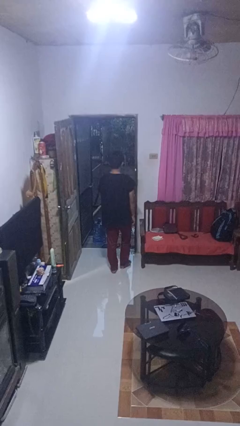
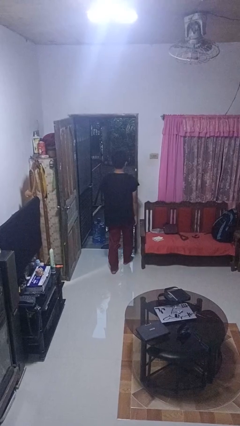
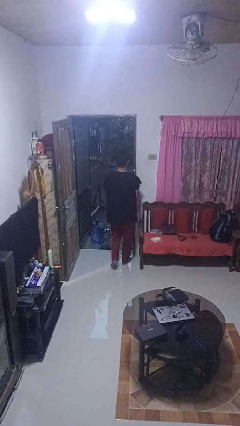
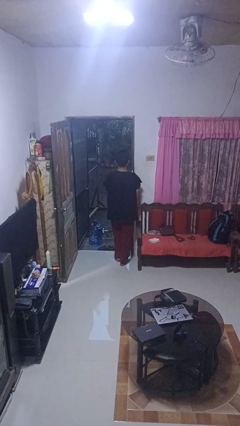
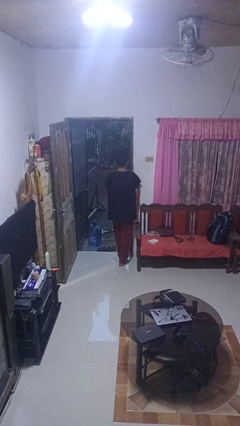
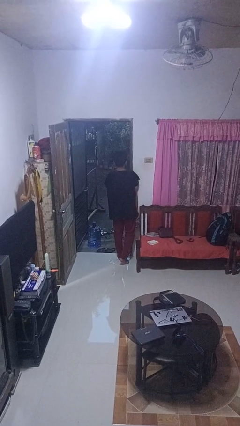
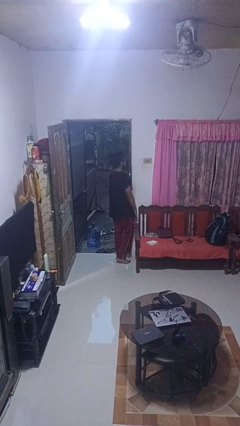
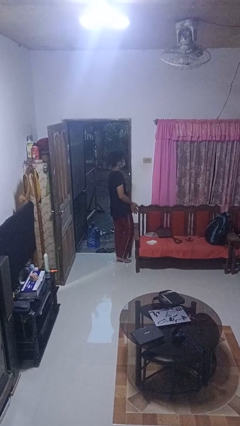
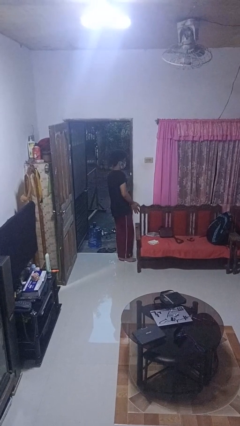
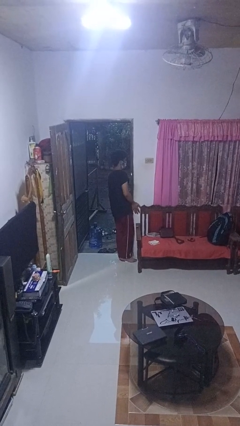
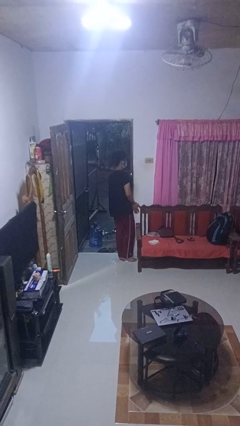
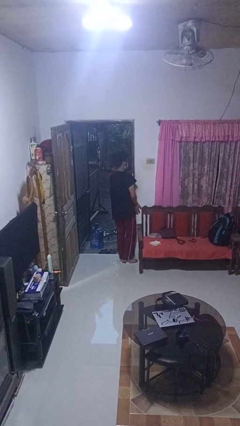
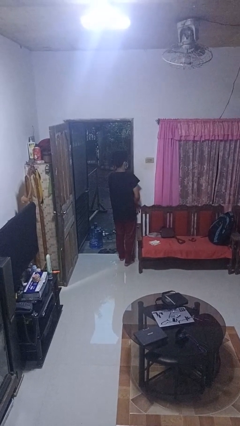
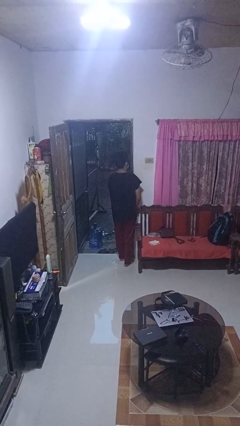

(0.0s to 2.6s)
person bumps into wall

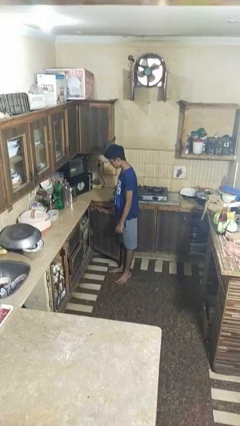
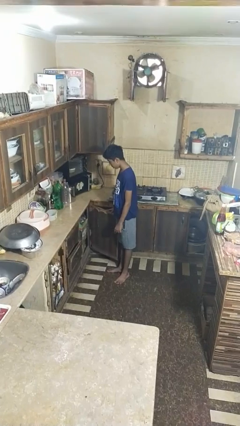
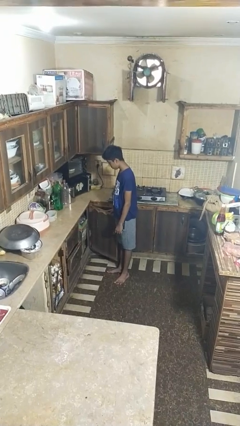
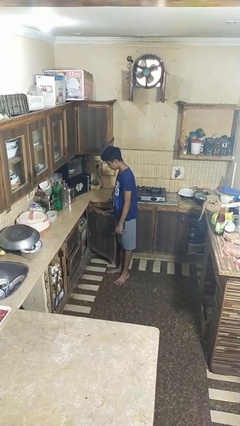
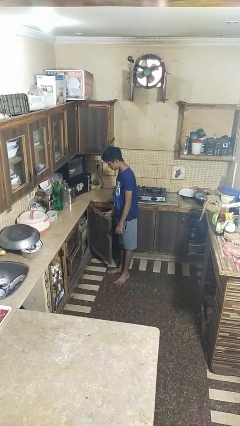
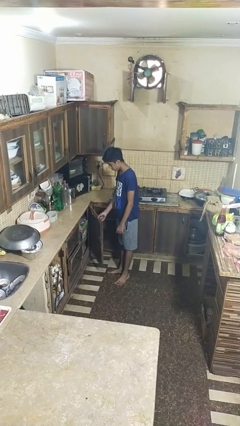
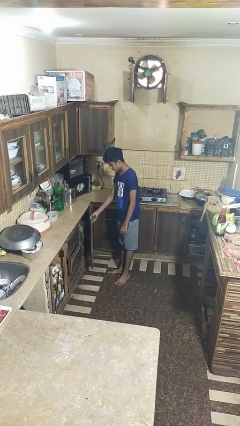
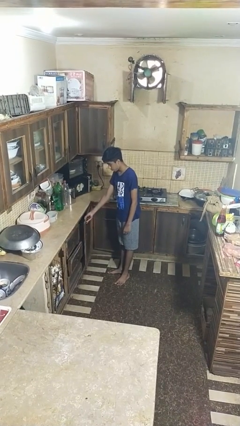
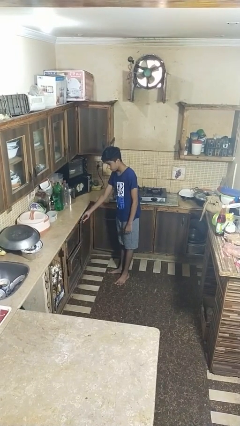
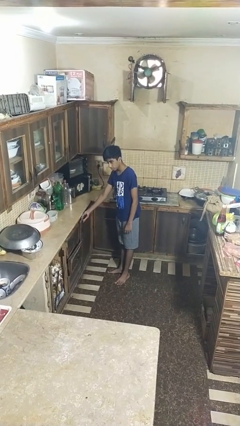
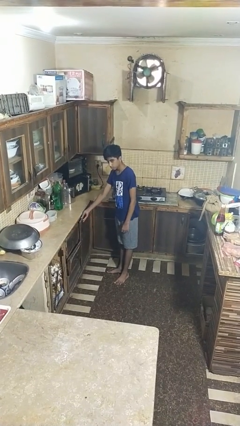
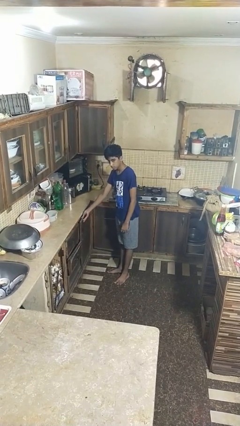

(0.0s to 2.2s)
person closes closet door

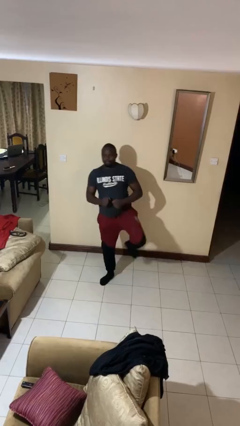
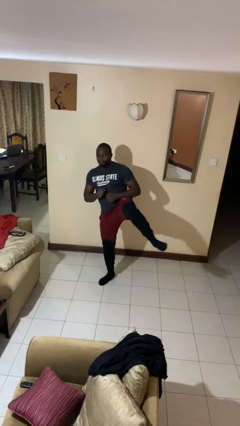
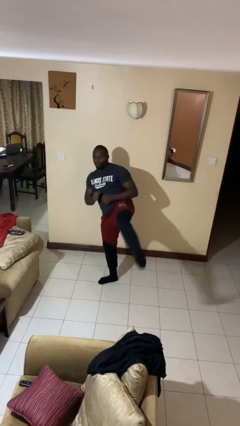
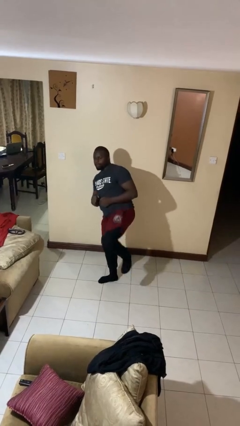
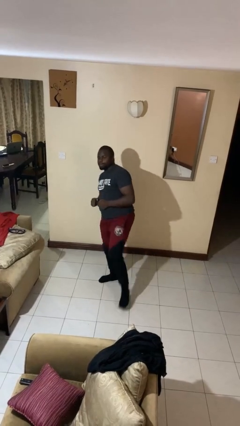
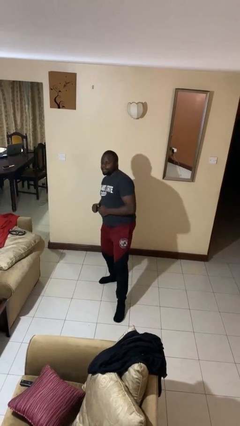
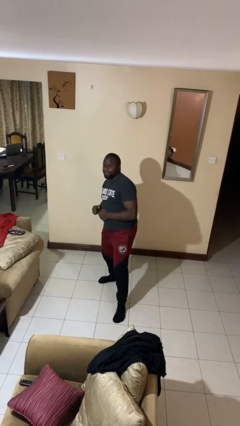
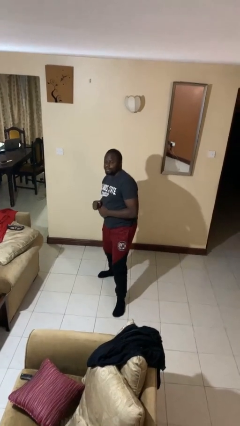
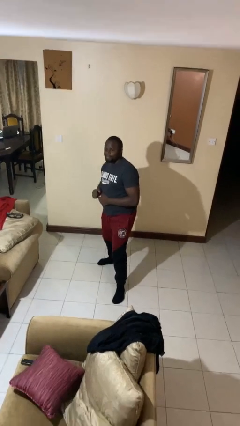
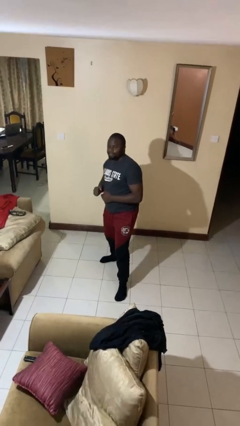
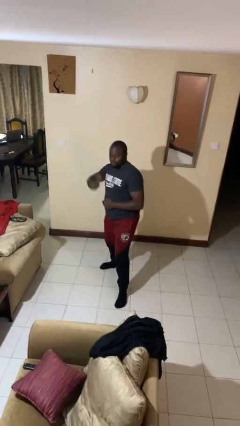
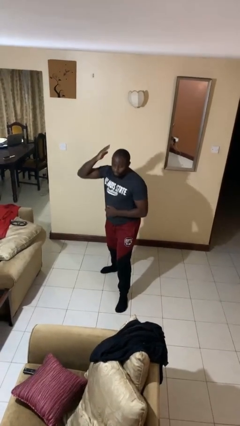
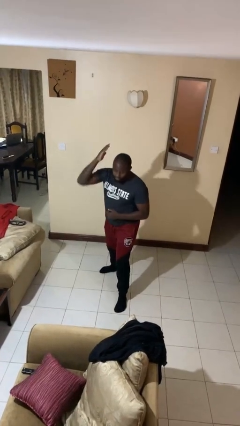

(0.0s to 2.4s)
person karate kicks

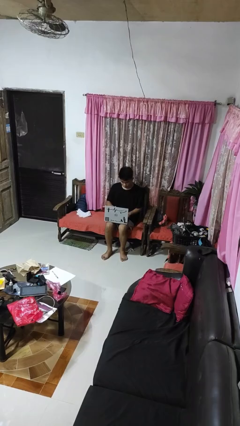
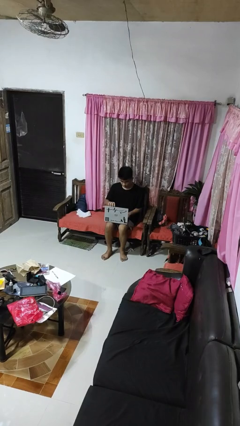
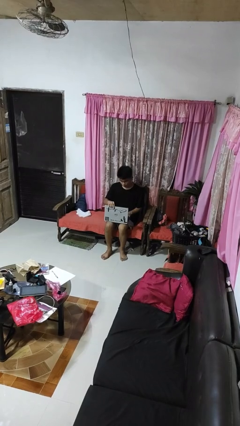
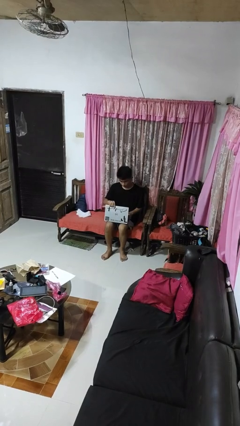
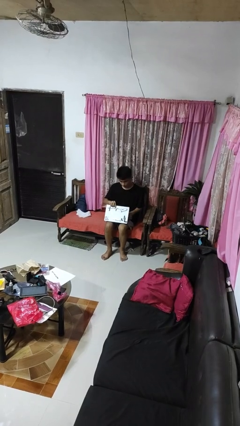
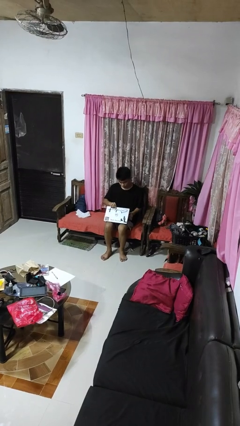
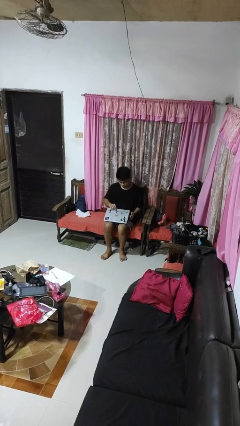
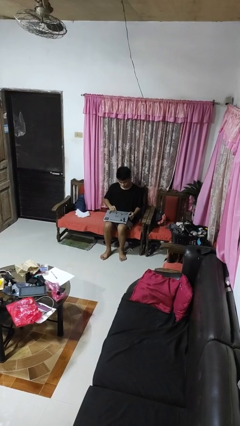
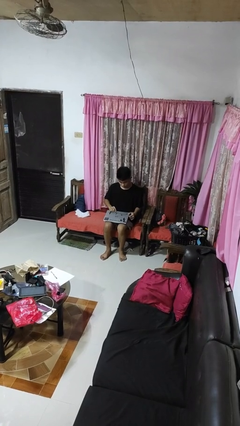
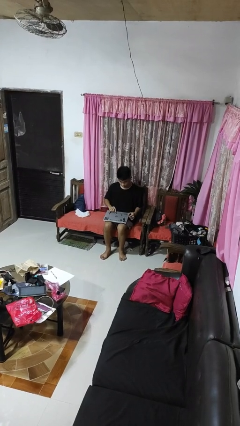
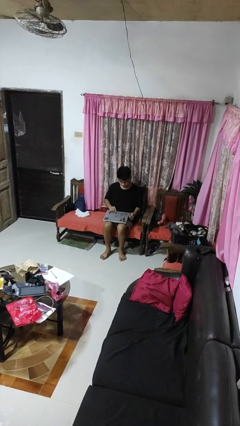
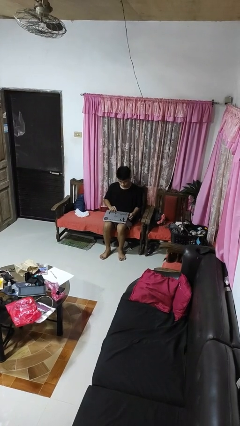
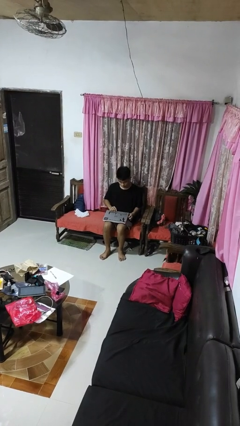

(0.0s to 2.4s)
person closes laptop

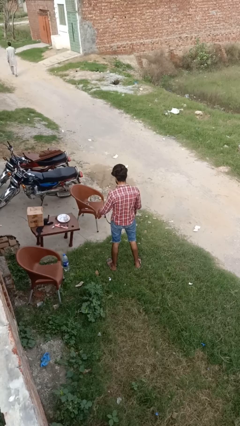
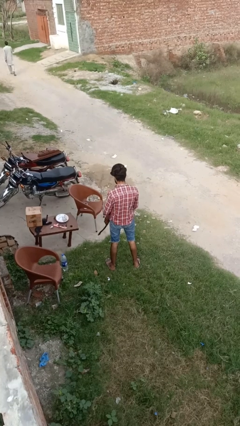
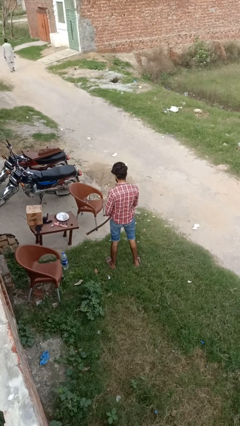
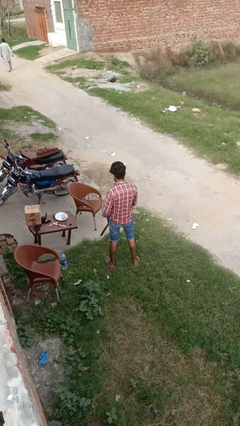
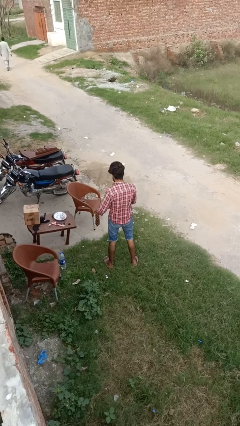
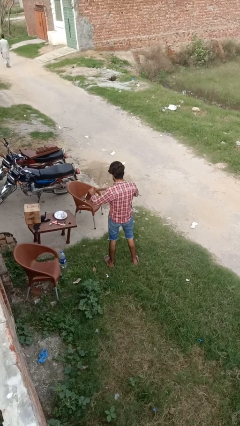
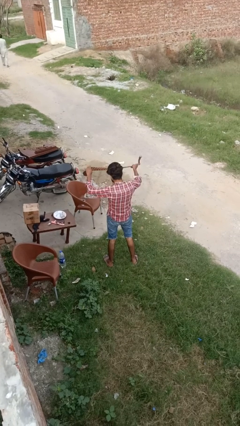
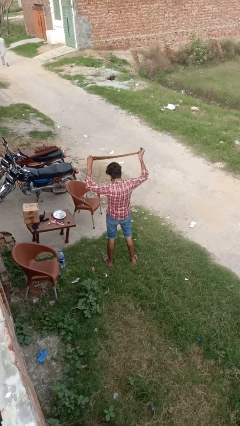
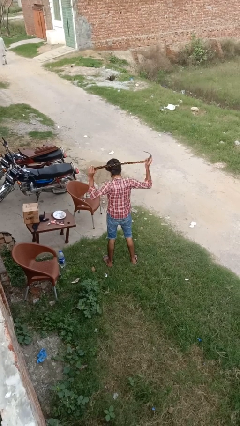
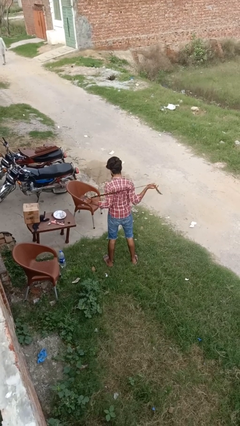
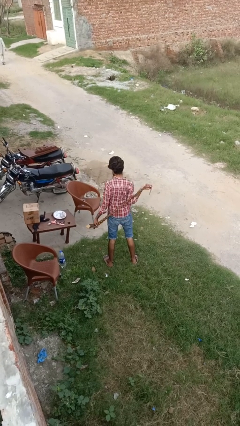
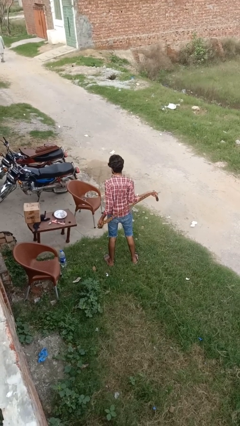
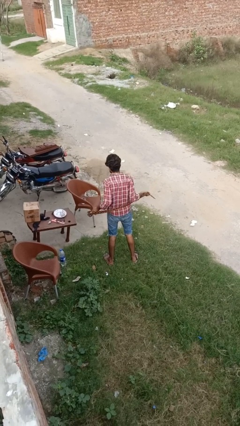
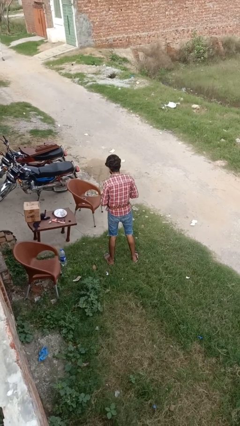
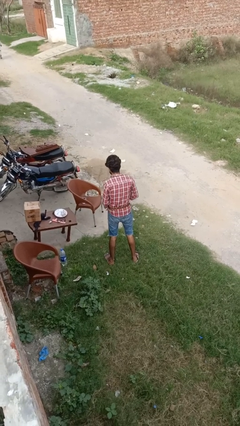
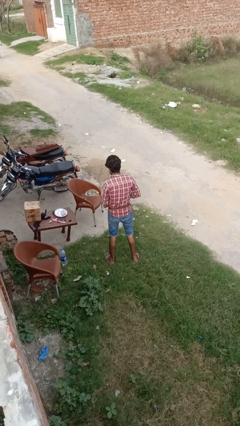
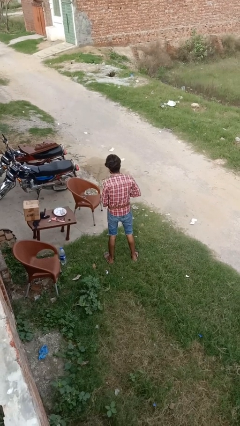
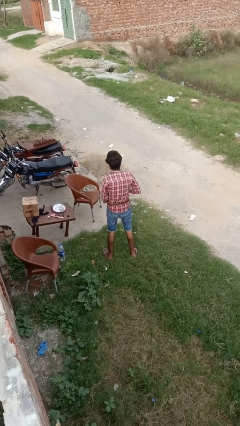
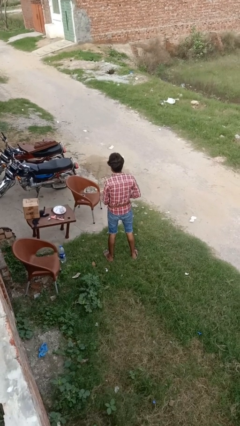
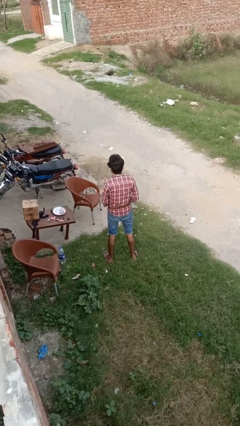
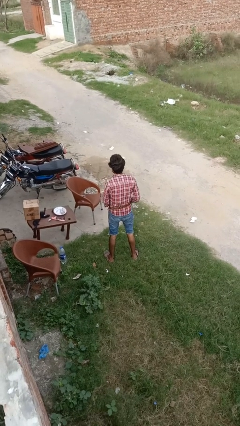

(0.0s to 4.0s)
person puts on belt

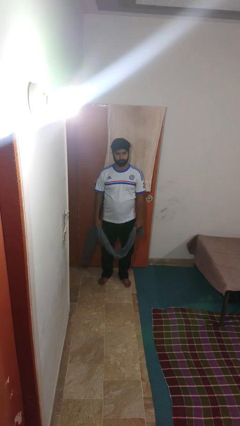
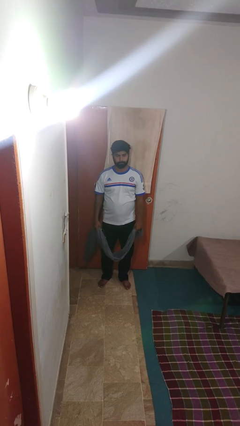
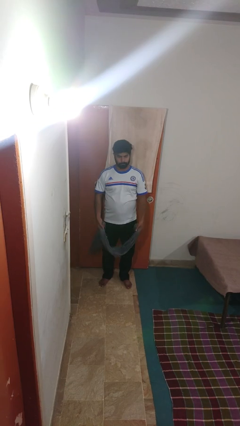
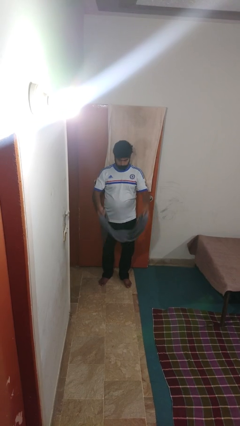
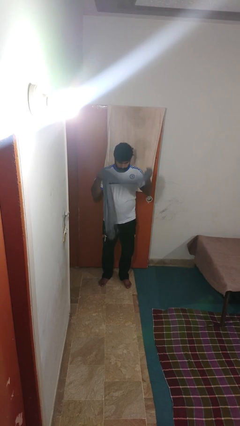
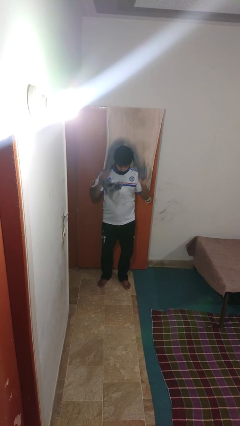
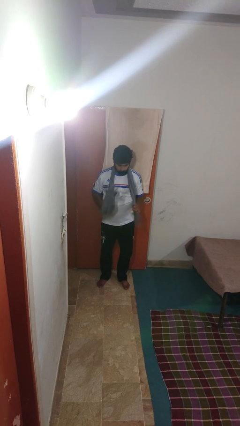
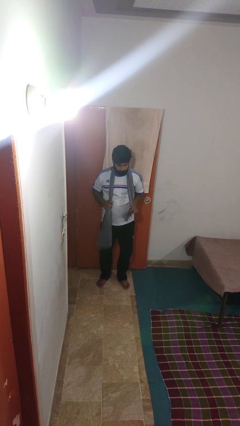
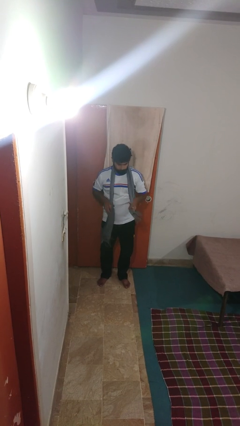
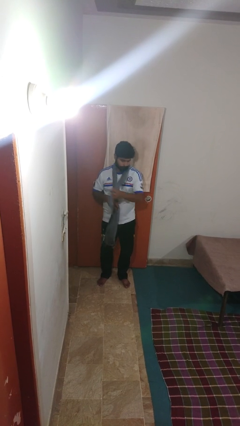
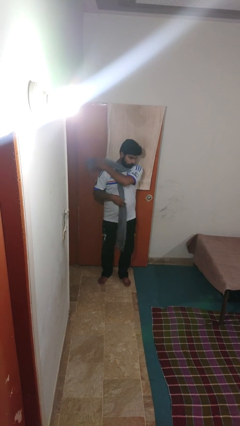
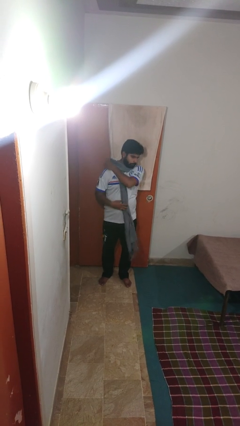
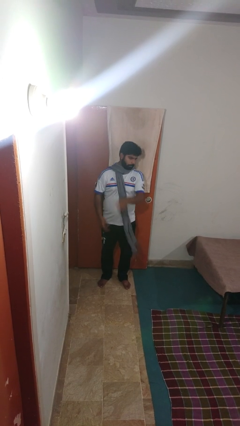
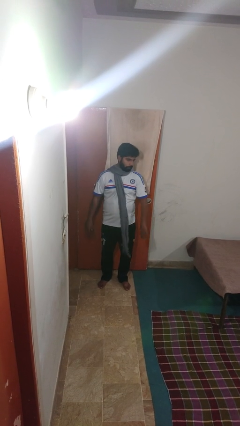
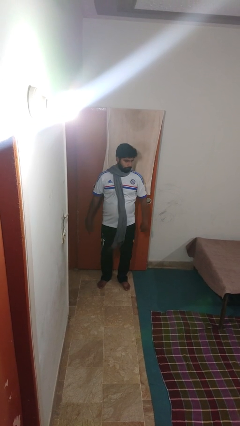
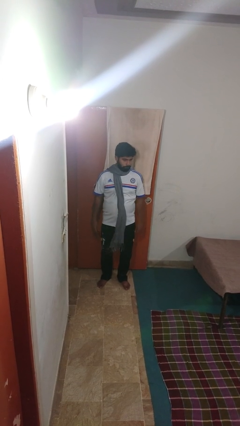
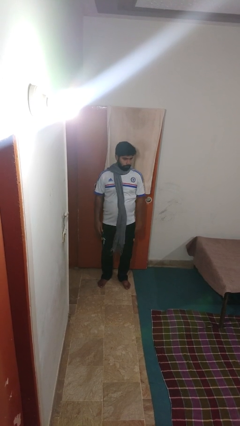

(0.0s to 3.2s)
person puts on scarf

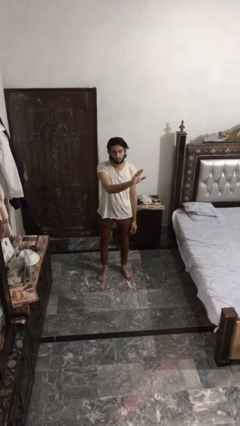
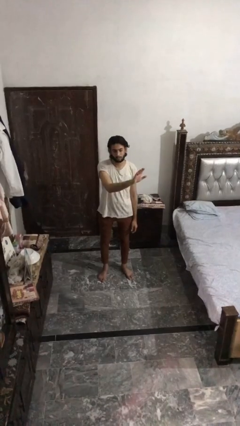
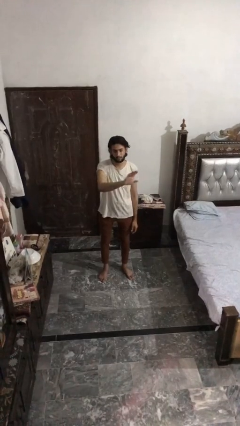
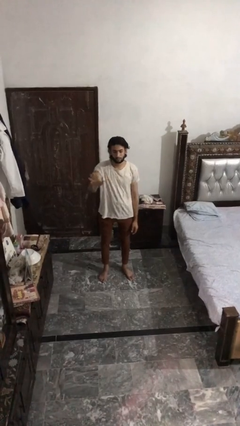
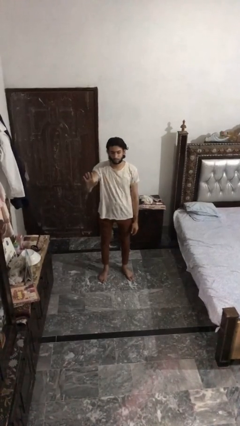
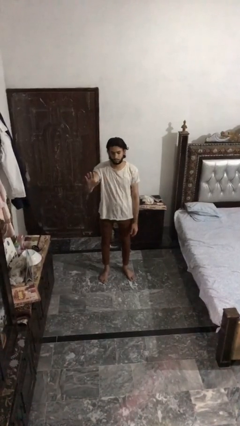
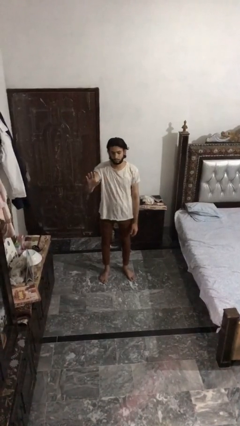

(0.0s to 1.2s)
person gestures swipe right
